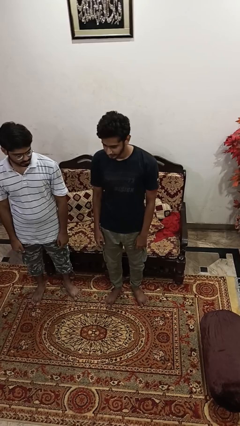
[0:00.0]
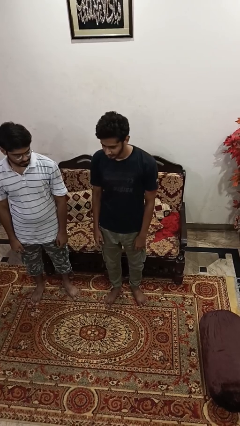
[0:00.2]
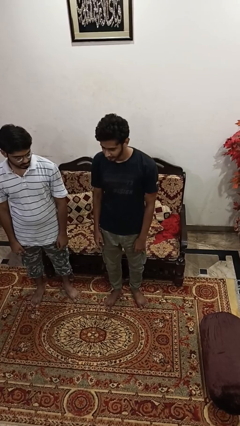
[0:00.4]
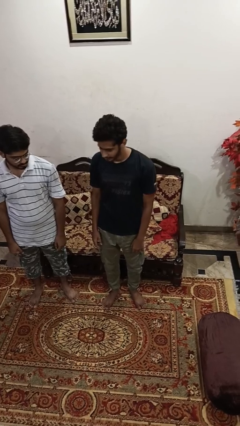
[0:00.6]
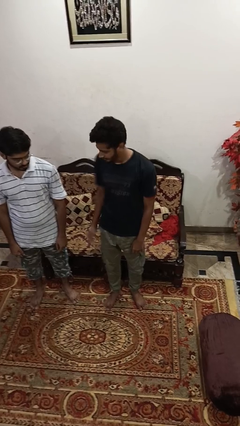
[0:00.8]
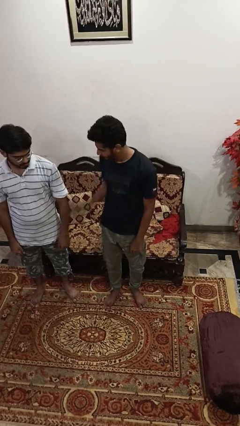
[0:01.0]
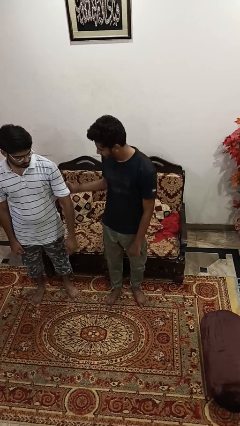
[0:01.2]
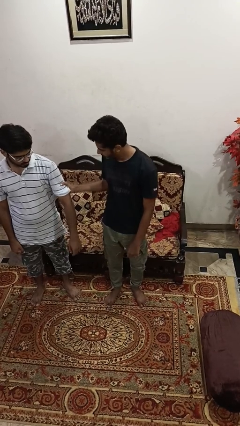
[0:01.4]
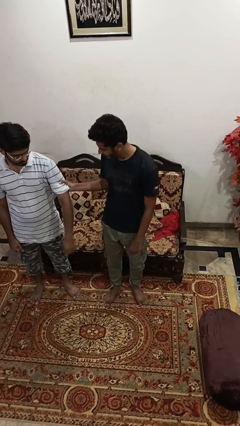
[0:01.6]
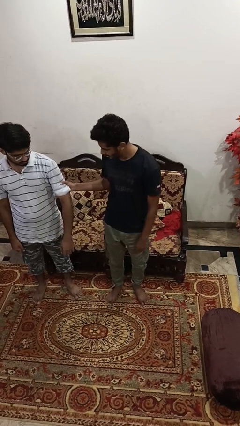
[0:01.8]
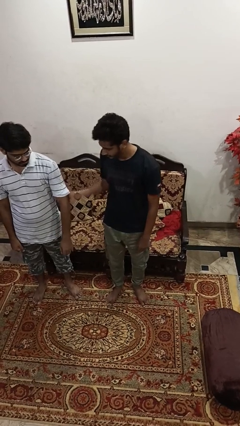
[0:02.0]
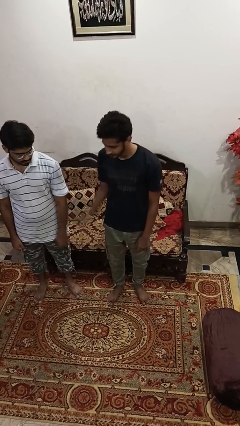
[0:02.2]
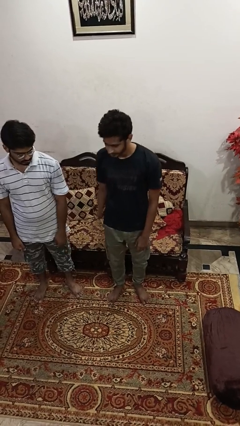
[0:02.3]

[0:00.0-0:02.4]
person grabs person by bicep

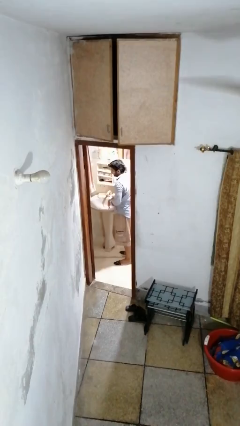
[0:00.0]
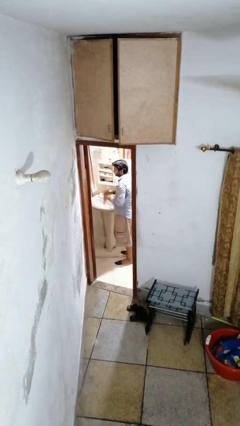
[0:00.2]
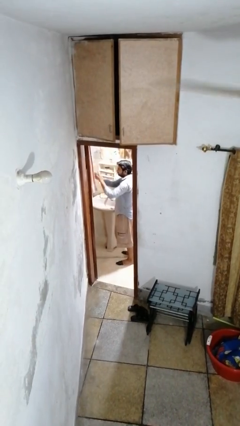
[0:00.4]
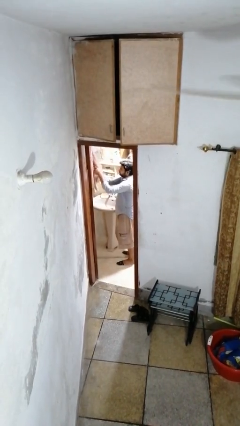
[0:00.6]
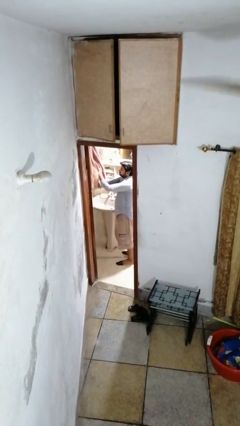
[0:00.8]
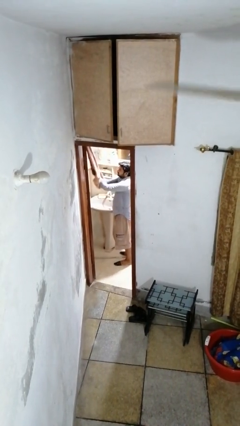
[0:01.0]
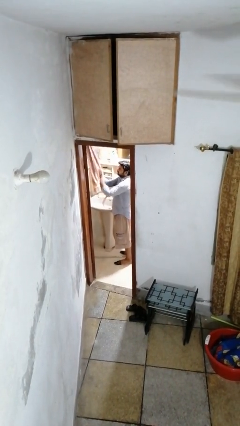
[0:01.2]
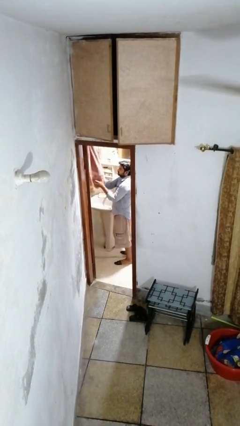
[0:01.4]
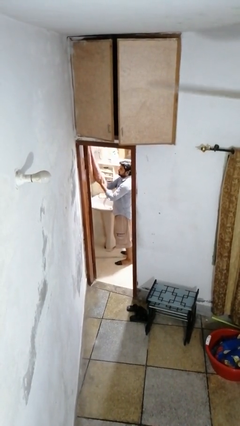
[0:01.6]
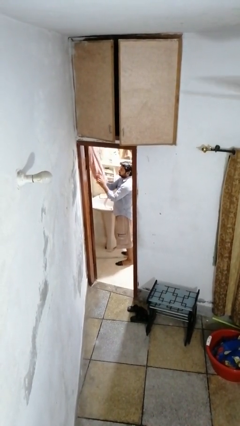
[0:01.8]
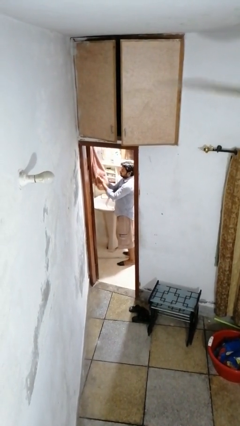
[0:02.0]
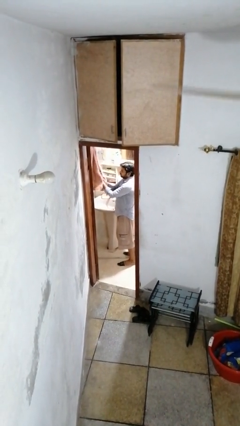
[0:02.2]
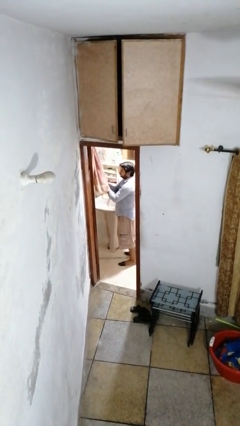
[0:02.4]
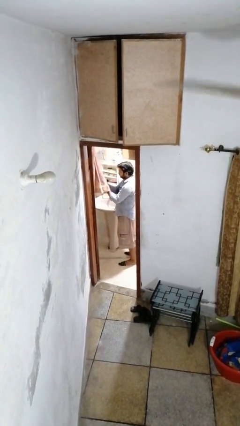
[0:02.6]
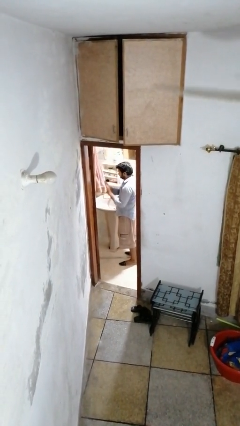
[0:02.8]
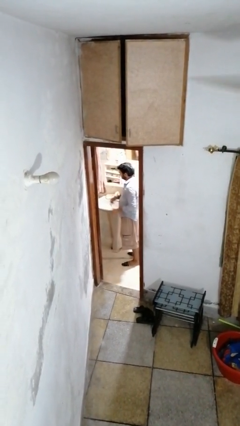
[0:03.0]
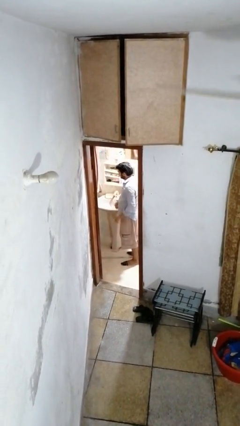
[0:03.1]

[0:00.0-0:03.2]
person dries hands with towel

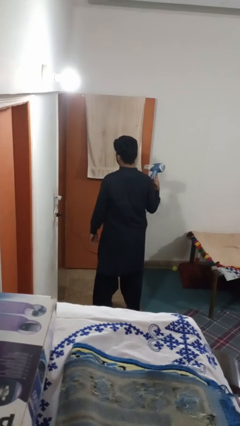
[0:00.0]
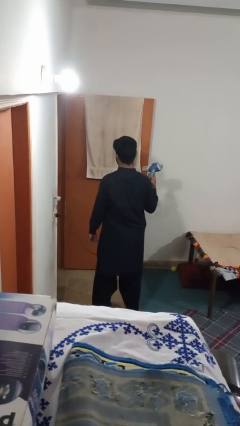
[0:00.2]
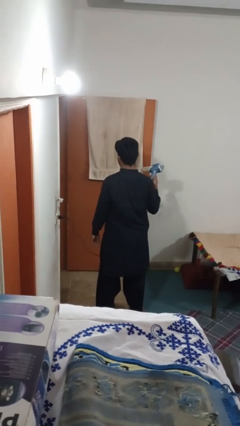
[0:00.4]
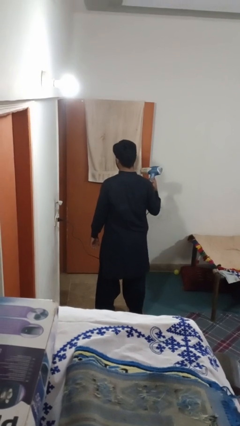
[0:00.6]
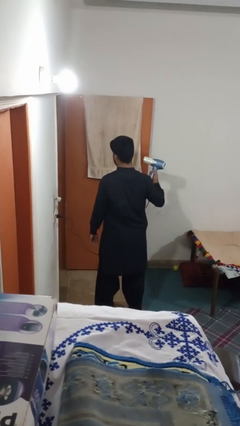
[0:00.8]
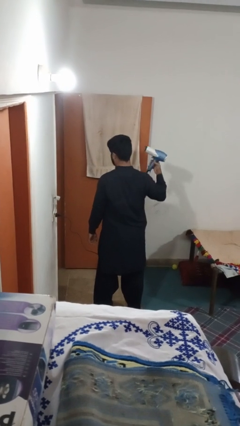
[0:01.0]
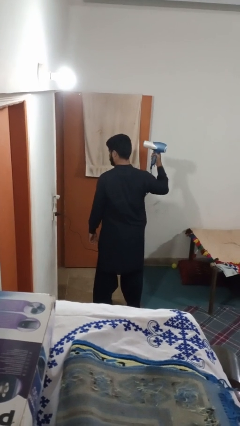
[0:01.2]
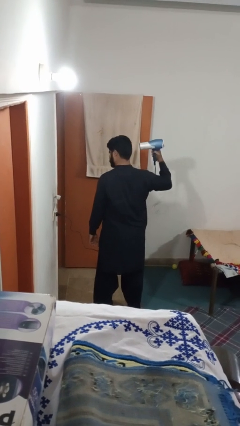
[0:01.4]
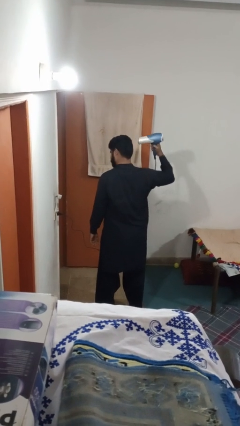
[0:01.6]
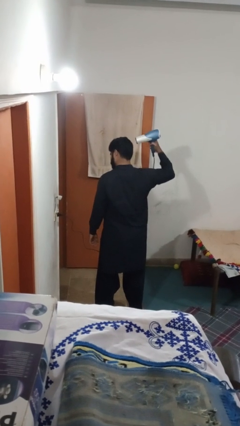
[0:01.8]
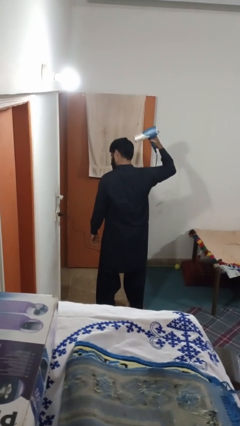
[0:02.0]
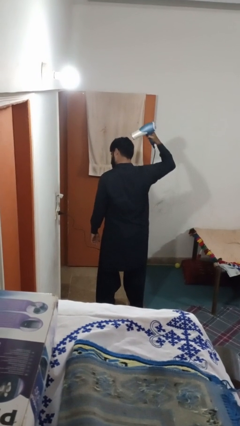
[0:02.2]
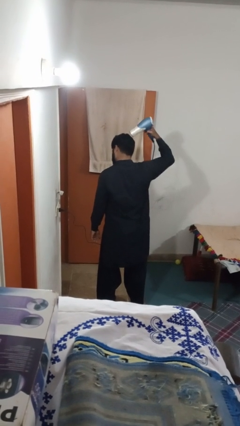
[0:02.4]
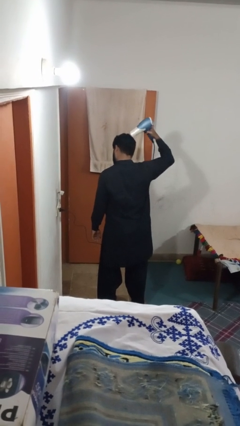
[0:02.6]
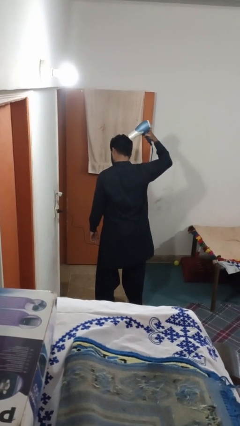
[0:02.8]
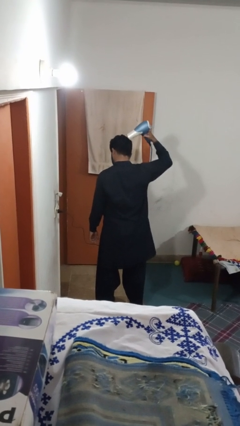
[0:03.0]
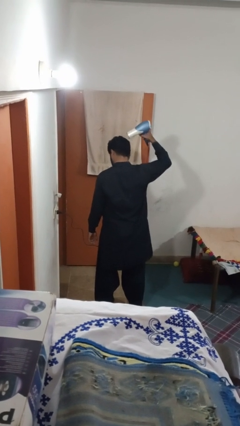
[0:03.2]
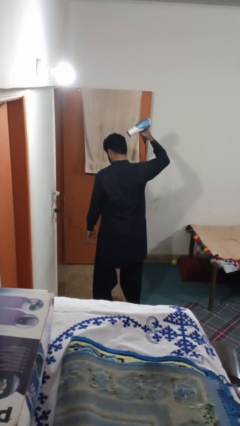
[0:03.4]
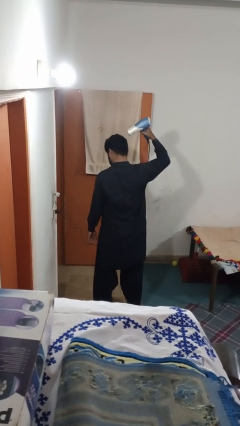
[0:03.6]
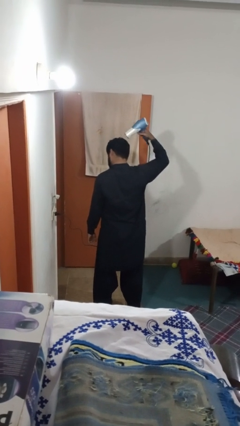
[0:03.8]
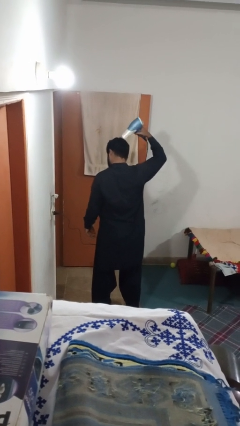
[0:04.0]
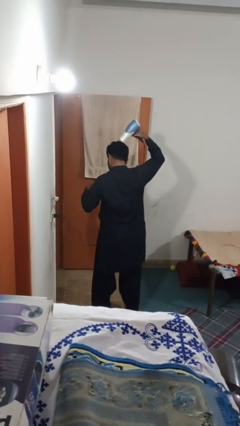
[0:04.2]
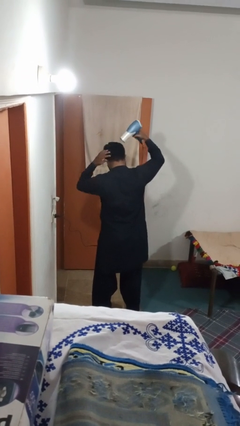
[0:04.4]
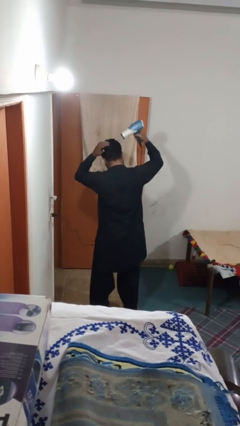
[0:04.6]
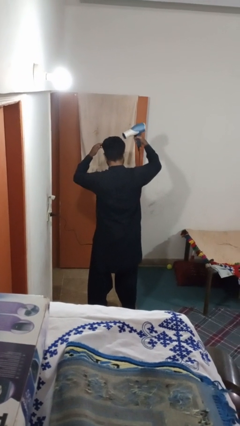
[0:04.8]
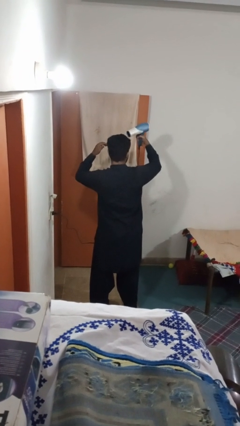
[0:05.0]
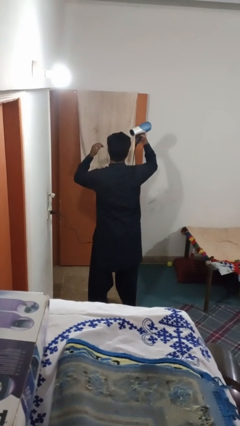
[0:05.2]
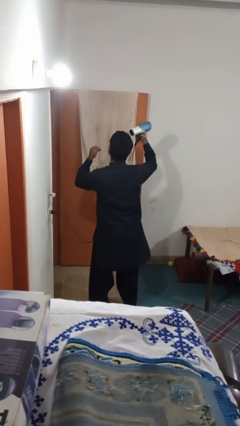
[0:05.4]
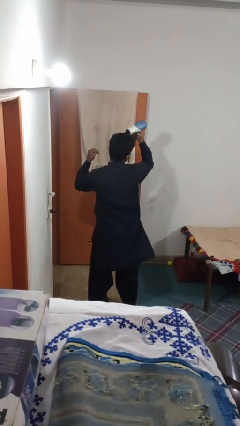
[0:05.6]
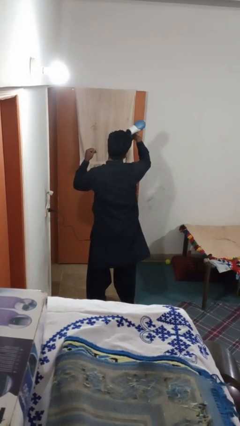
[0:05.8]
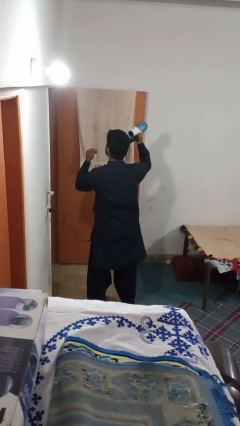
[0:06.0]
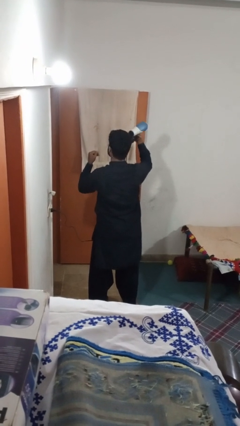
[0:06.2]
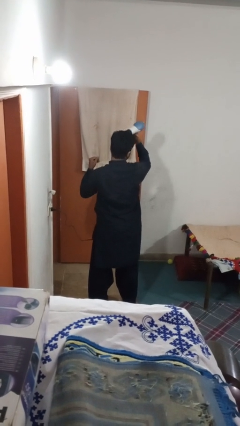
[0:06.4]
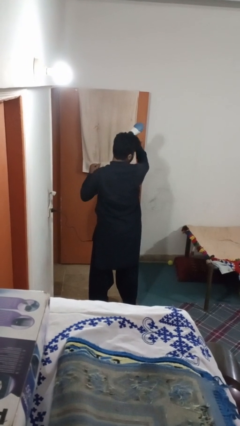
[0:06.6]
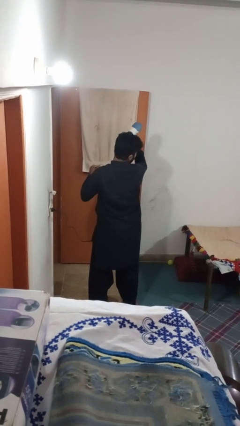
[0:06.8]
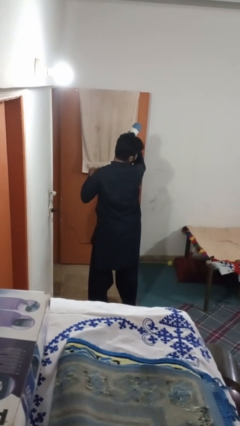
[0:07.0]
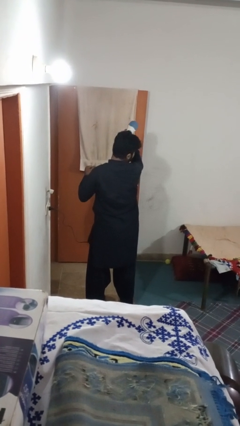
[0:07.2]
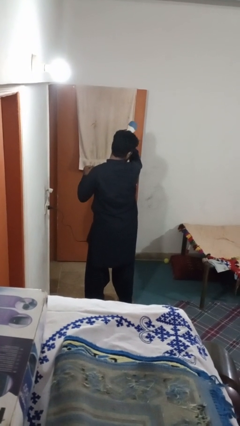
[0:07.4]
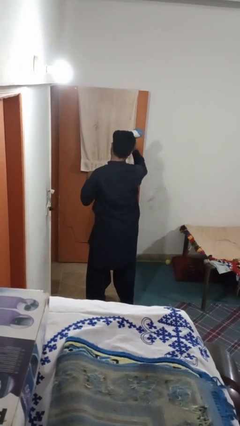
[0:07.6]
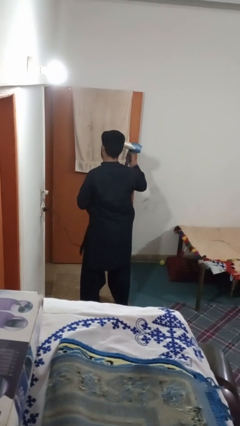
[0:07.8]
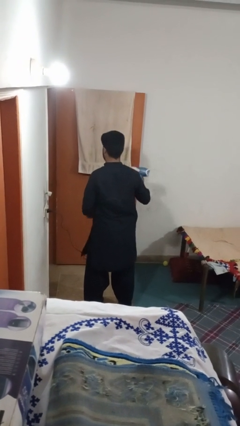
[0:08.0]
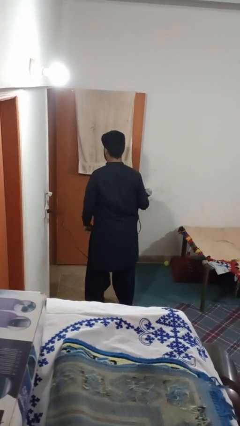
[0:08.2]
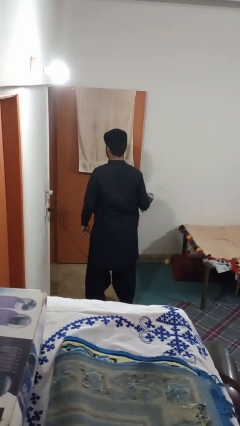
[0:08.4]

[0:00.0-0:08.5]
person dries hair with hairdryer

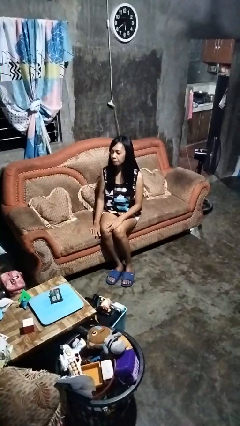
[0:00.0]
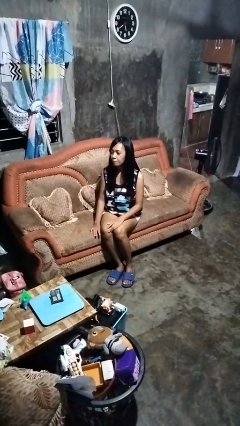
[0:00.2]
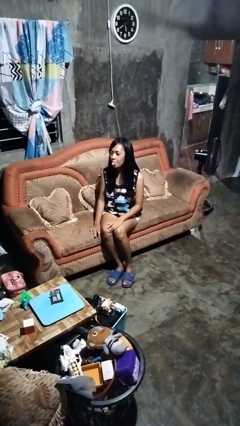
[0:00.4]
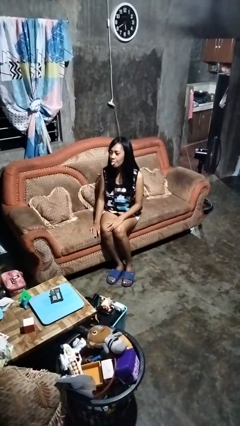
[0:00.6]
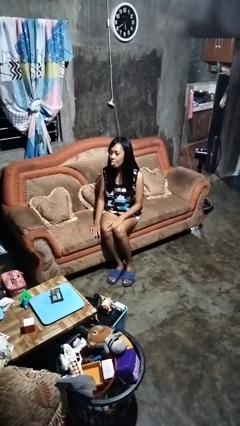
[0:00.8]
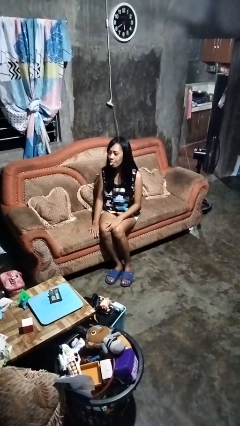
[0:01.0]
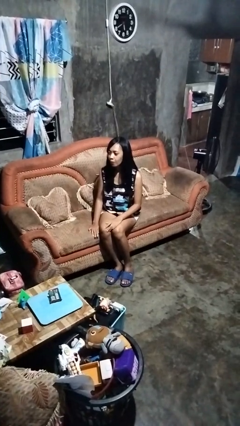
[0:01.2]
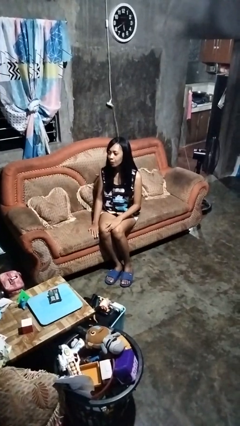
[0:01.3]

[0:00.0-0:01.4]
person sticks out tongue

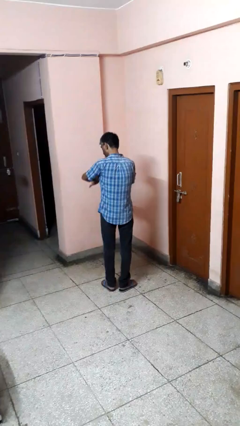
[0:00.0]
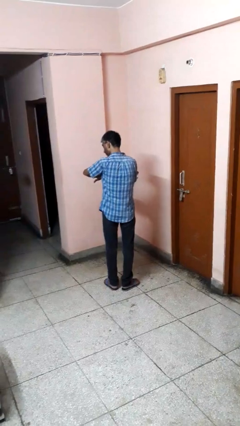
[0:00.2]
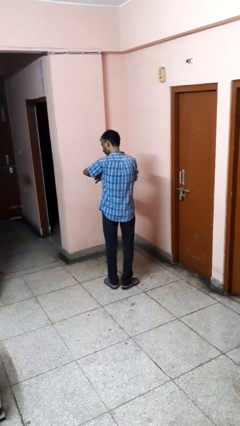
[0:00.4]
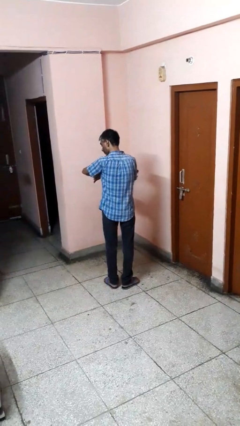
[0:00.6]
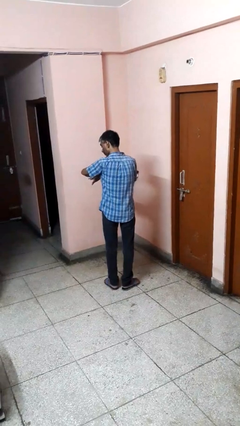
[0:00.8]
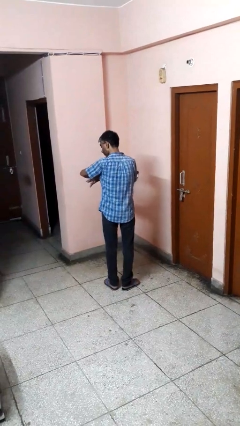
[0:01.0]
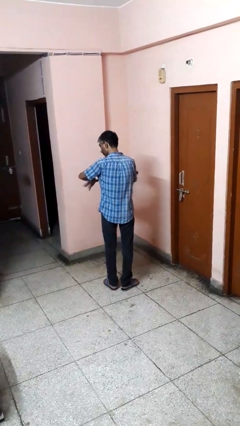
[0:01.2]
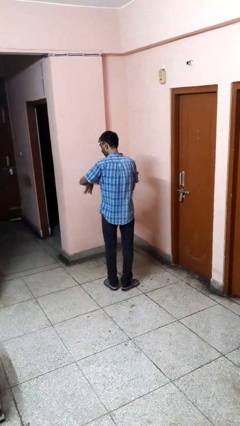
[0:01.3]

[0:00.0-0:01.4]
person swats bug

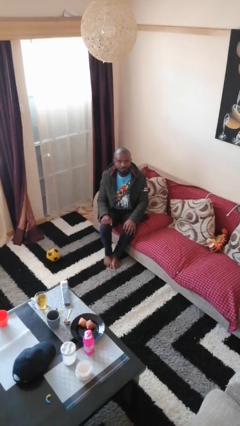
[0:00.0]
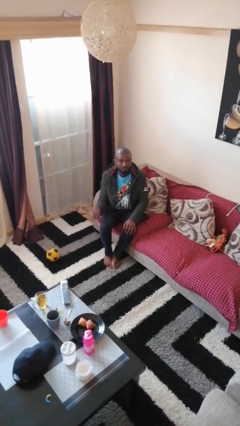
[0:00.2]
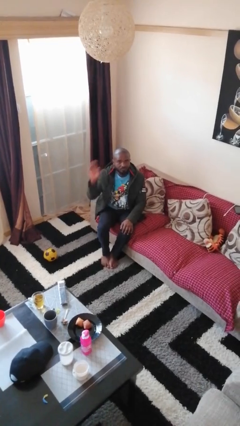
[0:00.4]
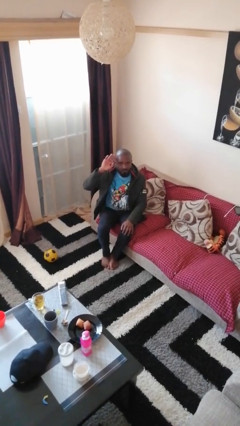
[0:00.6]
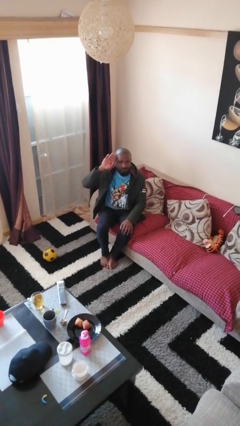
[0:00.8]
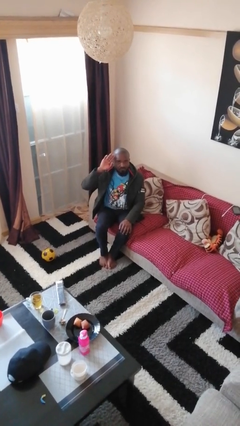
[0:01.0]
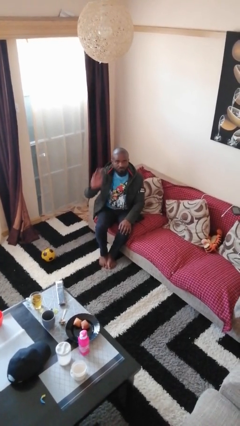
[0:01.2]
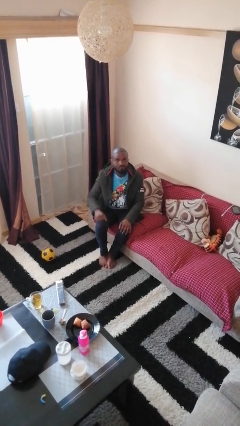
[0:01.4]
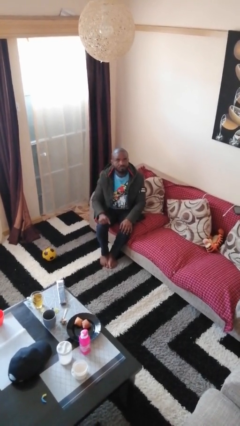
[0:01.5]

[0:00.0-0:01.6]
person salutes
